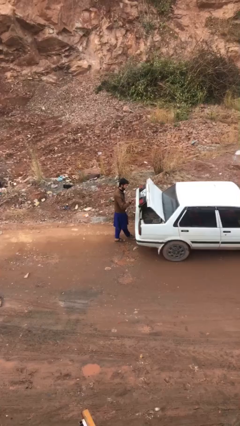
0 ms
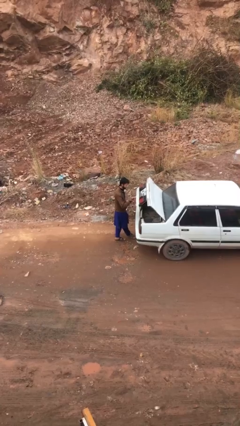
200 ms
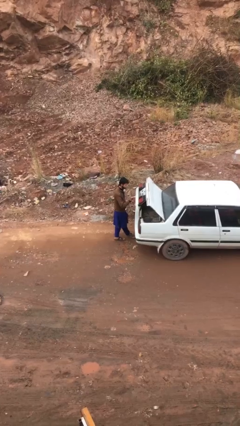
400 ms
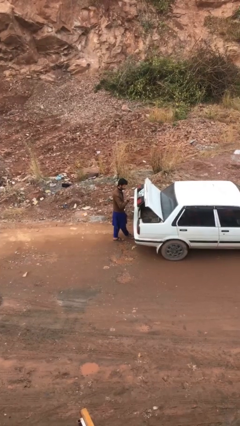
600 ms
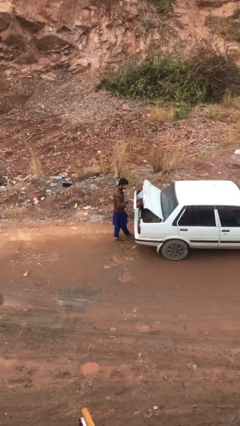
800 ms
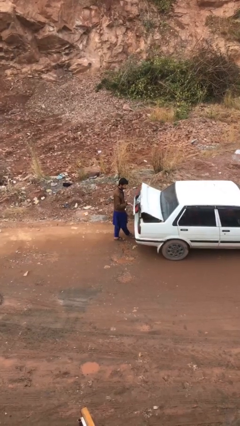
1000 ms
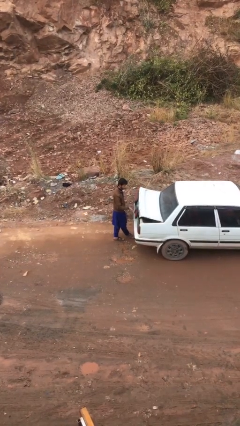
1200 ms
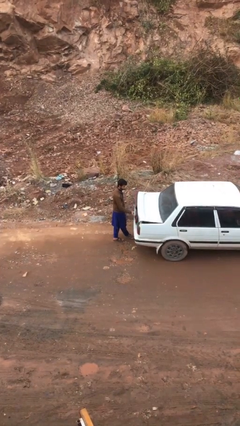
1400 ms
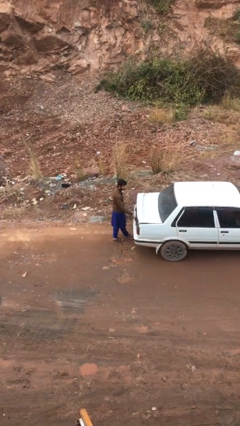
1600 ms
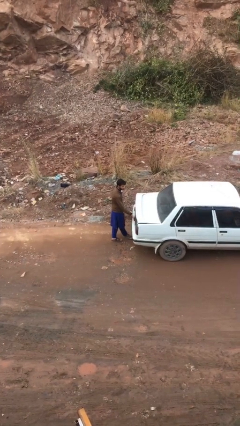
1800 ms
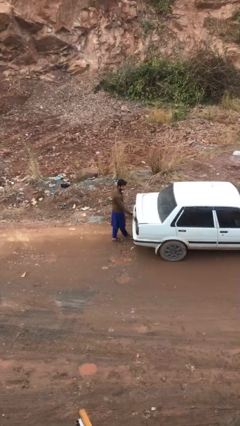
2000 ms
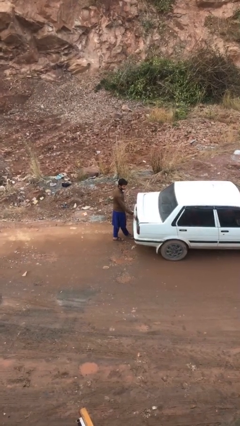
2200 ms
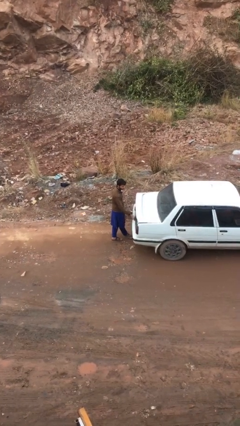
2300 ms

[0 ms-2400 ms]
person closes car trunk

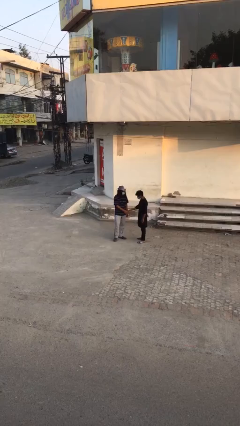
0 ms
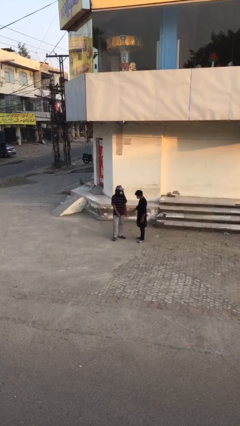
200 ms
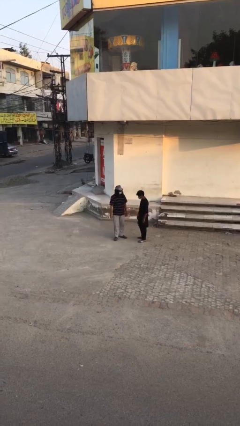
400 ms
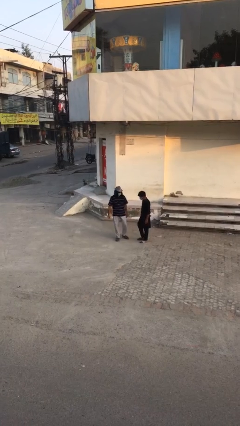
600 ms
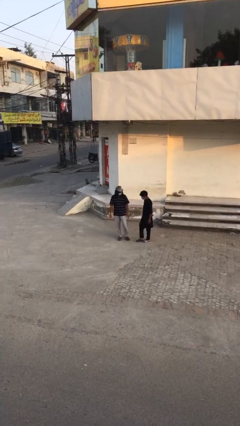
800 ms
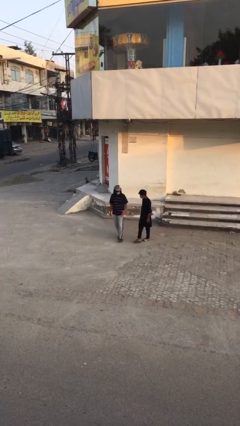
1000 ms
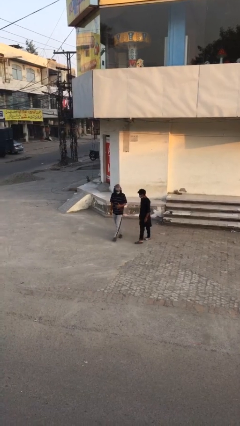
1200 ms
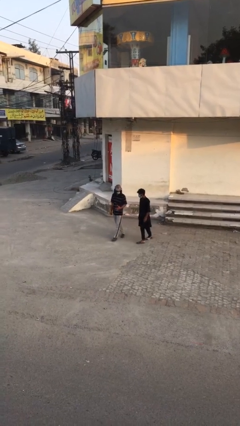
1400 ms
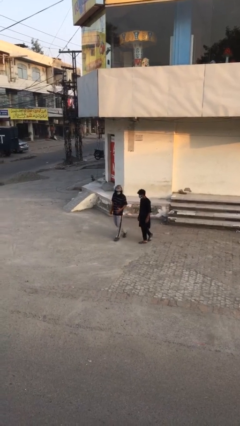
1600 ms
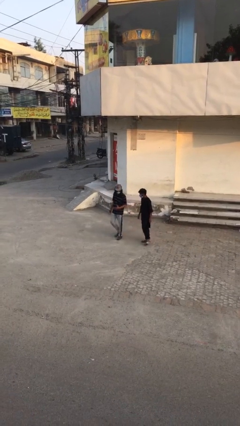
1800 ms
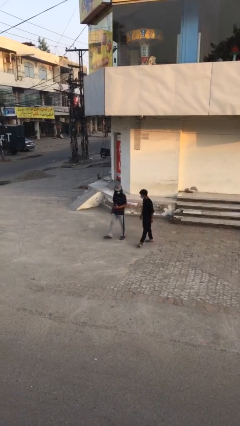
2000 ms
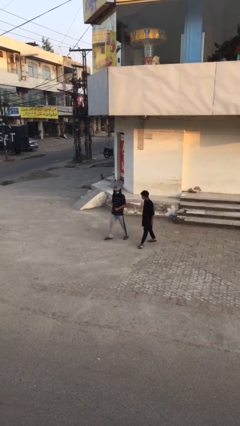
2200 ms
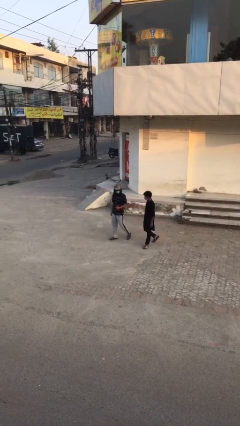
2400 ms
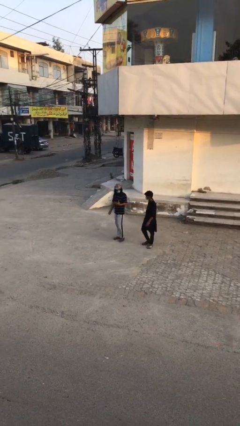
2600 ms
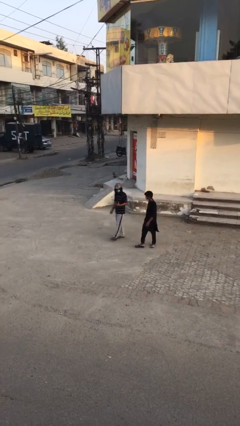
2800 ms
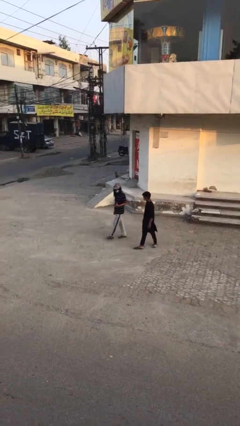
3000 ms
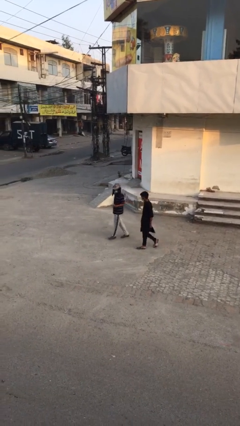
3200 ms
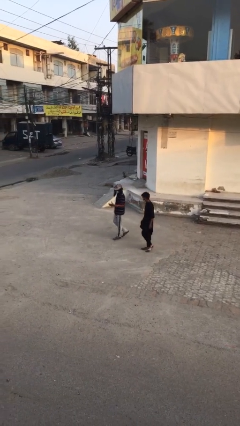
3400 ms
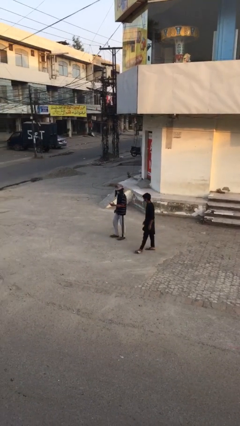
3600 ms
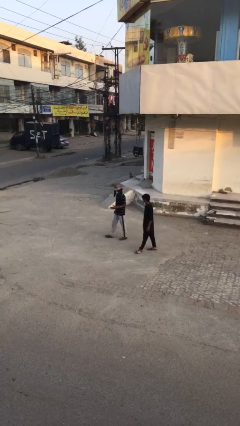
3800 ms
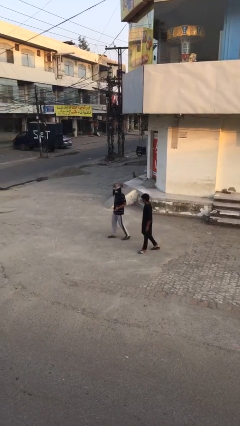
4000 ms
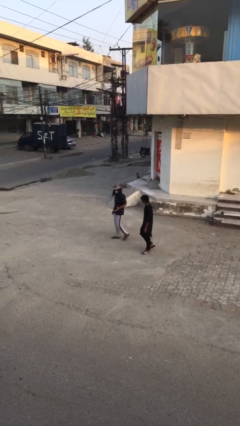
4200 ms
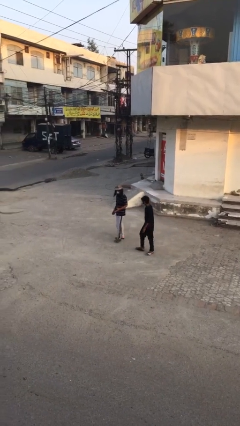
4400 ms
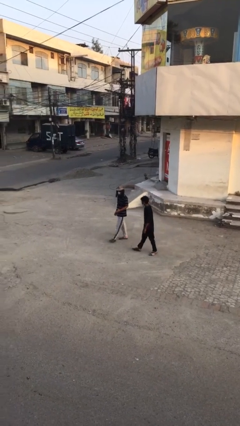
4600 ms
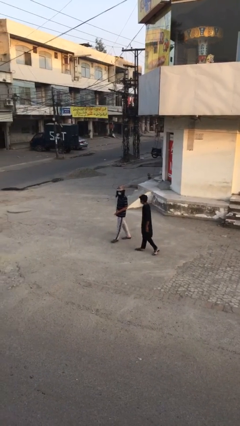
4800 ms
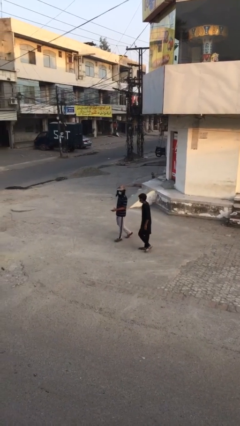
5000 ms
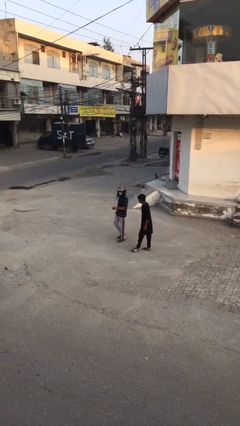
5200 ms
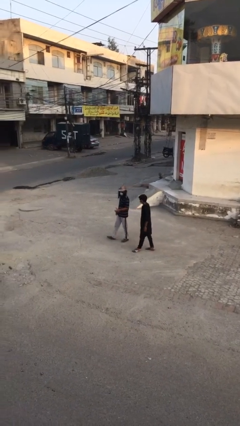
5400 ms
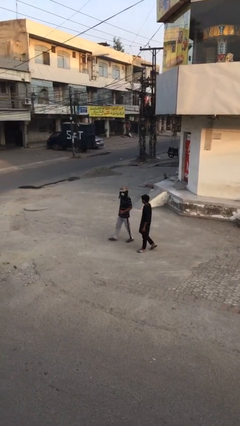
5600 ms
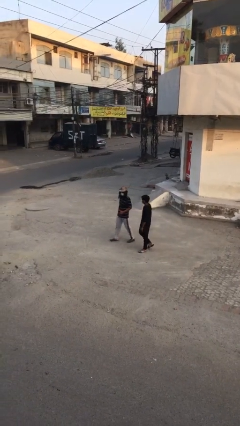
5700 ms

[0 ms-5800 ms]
person talks to person

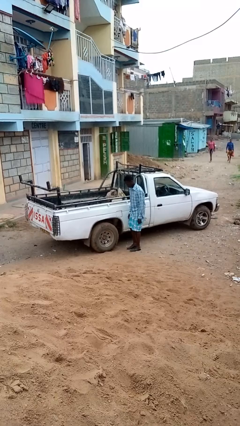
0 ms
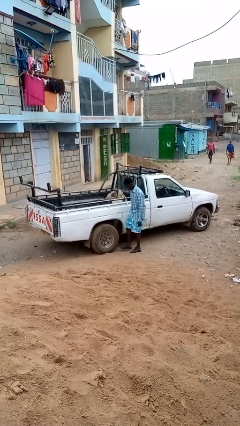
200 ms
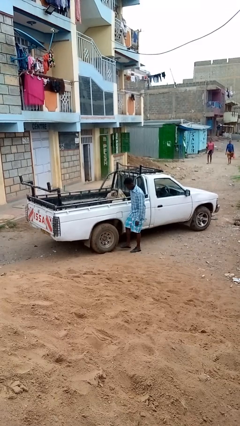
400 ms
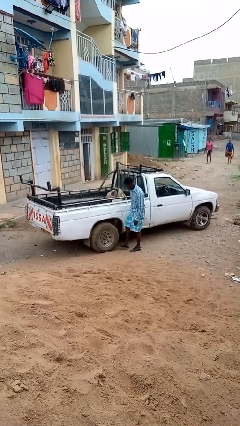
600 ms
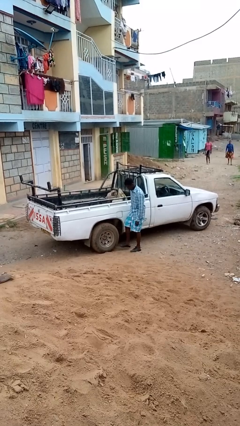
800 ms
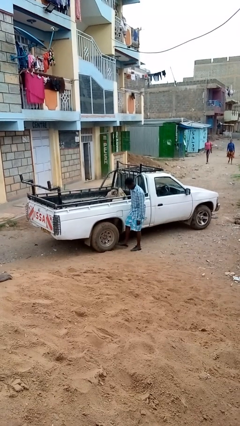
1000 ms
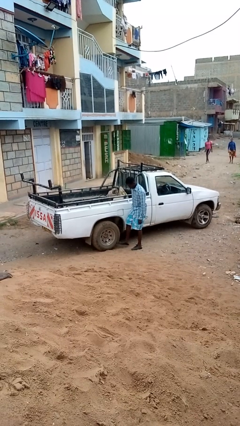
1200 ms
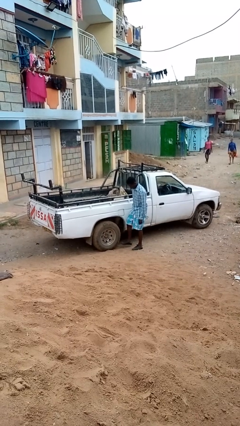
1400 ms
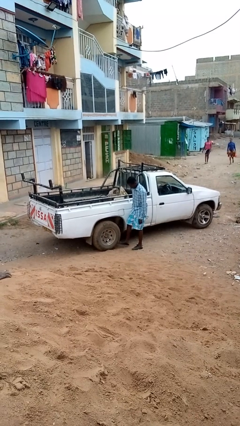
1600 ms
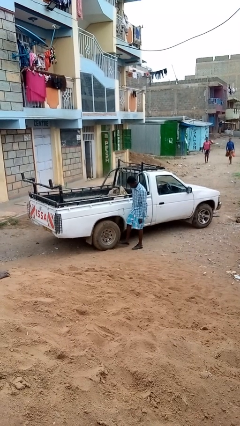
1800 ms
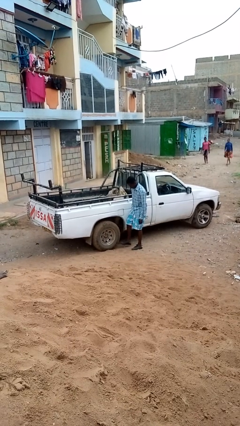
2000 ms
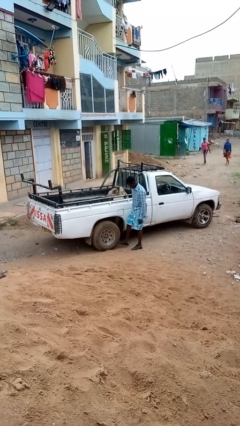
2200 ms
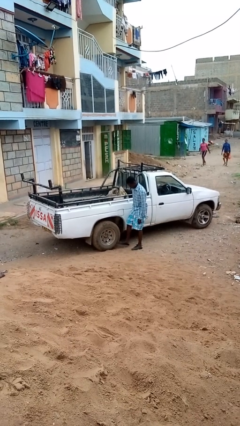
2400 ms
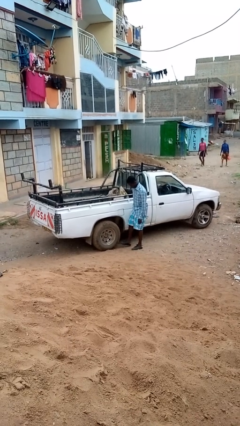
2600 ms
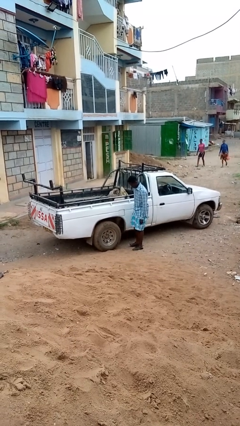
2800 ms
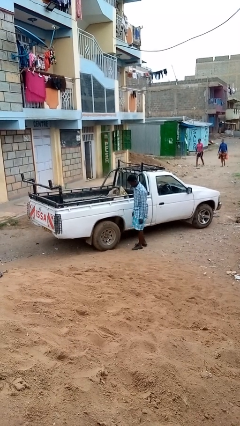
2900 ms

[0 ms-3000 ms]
person kicks car tires

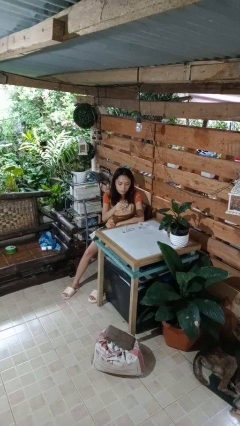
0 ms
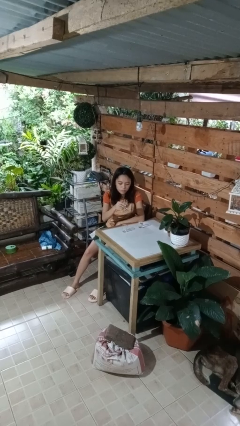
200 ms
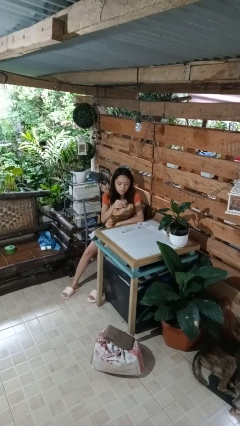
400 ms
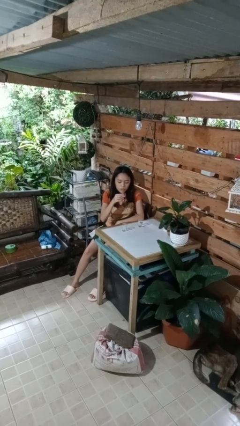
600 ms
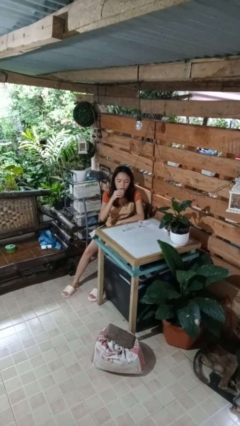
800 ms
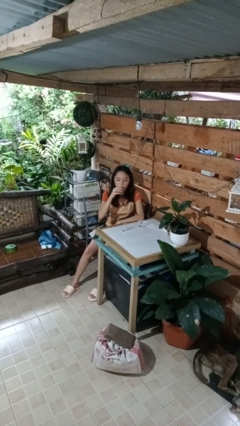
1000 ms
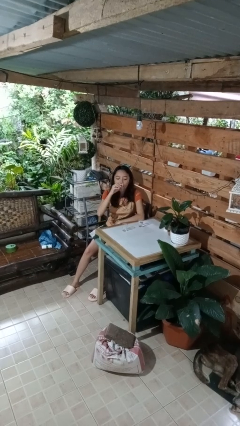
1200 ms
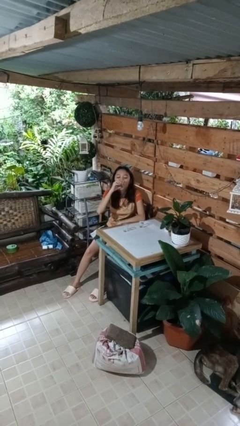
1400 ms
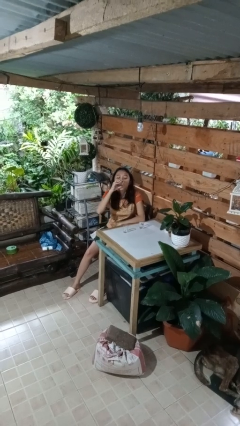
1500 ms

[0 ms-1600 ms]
person drinks from shotglass

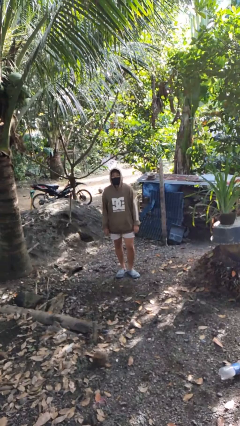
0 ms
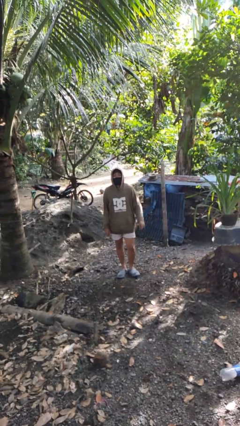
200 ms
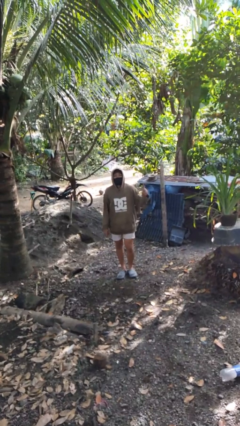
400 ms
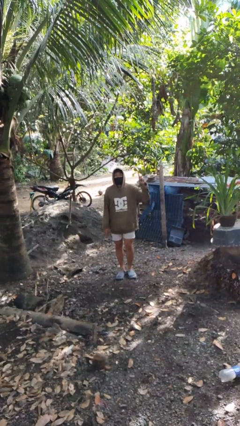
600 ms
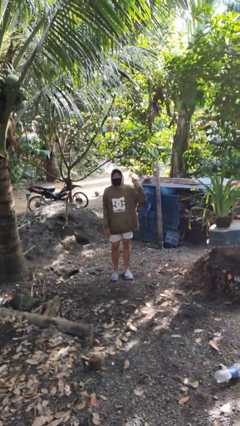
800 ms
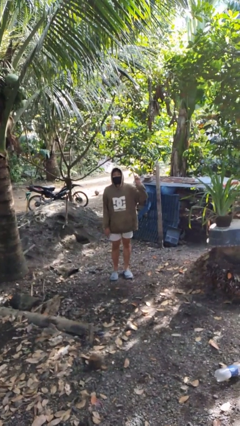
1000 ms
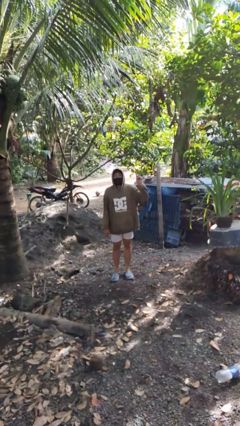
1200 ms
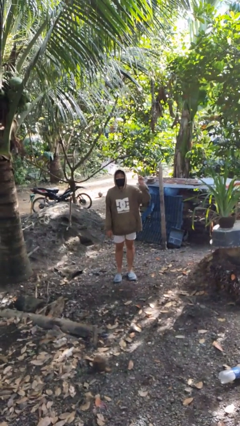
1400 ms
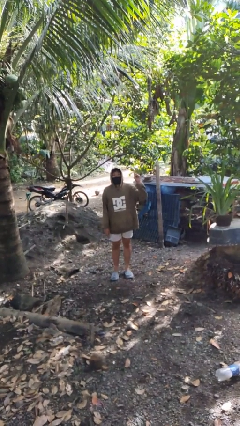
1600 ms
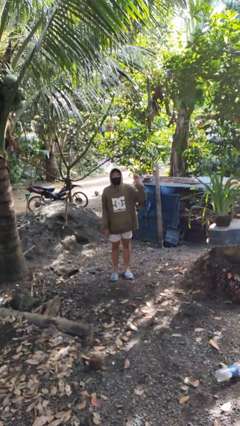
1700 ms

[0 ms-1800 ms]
person gestures number one

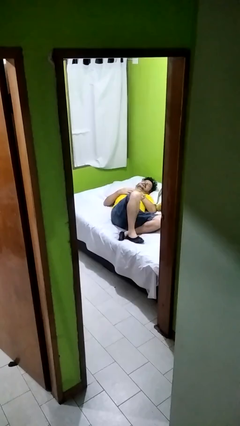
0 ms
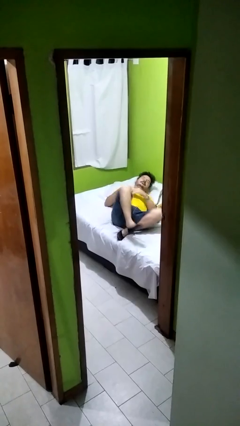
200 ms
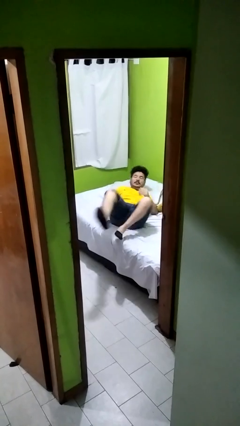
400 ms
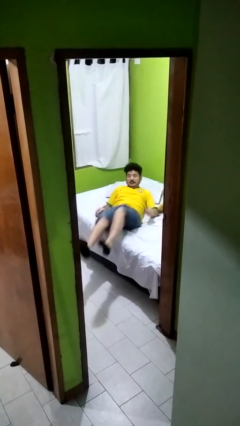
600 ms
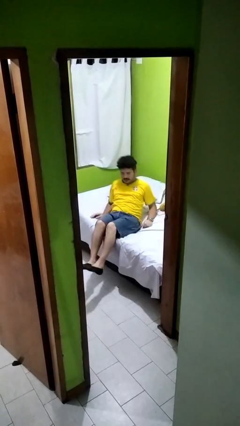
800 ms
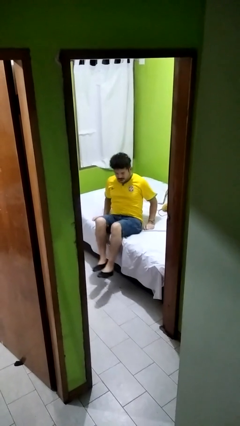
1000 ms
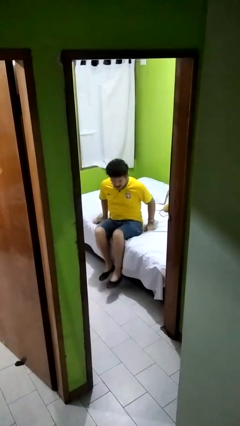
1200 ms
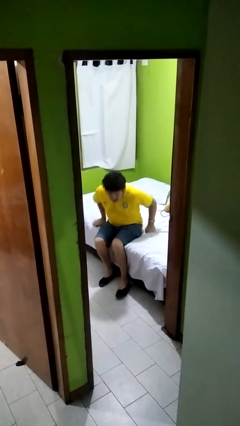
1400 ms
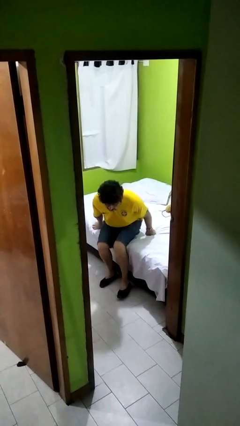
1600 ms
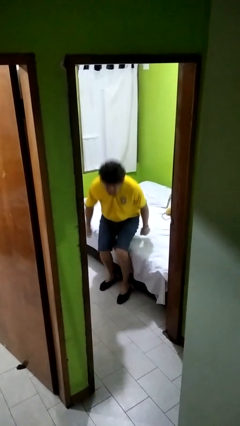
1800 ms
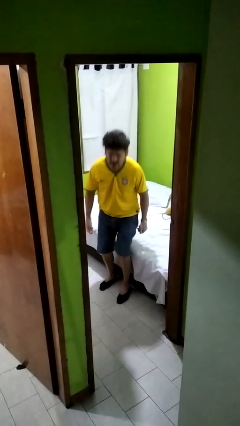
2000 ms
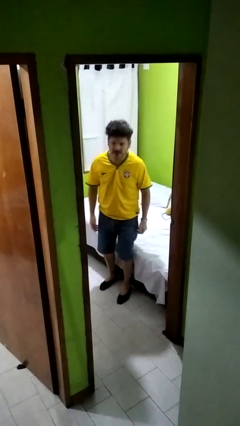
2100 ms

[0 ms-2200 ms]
person stands up

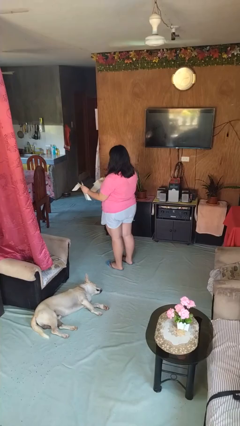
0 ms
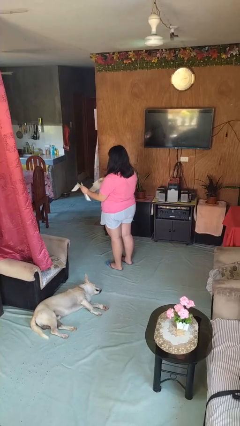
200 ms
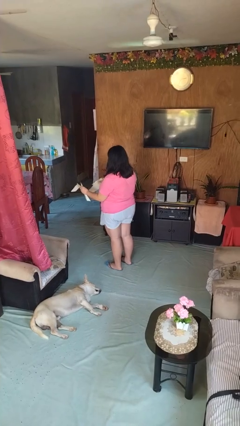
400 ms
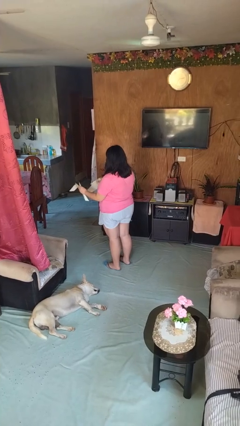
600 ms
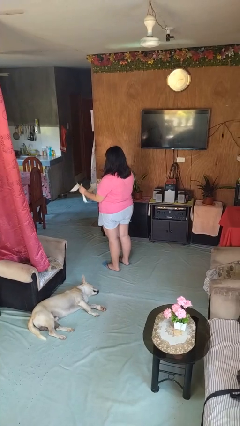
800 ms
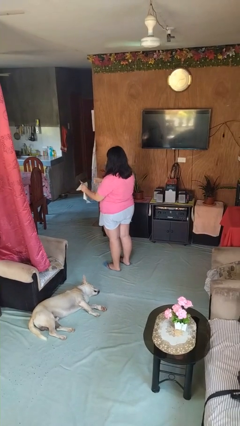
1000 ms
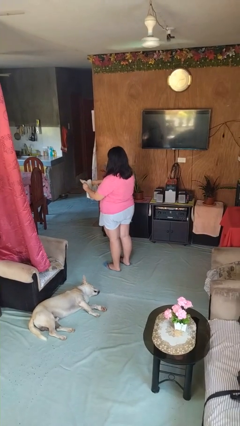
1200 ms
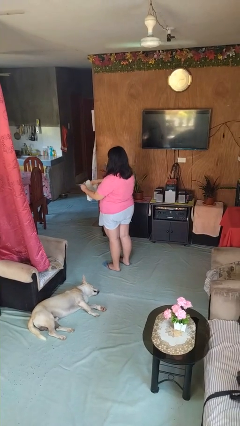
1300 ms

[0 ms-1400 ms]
person tears paper
